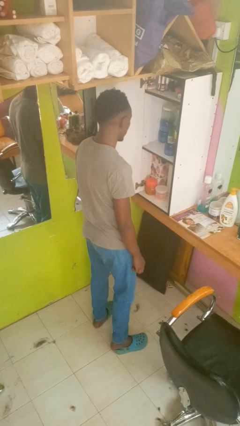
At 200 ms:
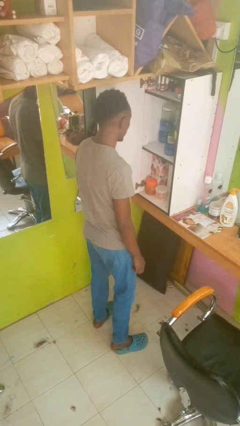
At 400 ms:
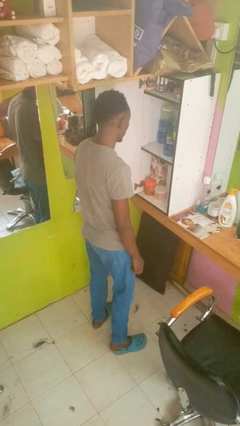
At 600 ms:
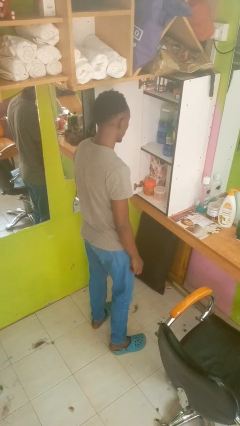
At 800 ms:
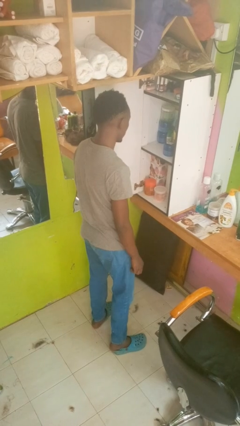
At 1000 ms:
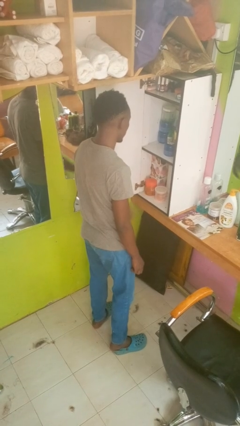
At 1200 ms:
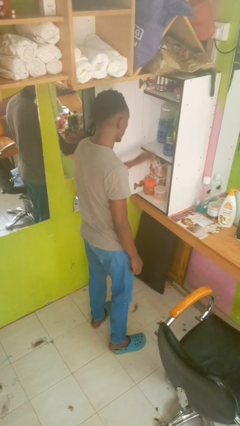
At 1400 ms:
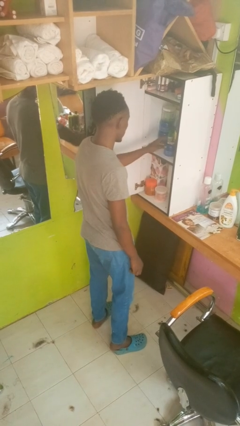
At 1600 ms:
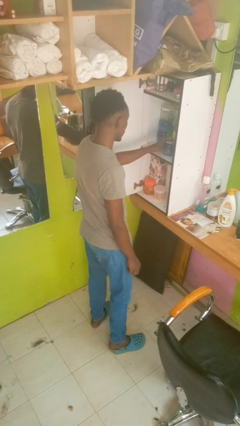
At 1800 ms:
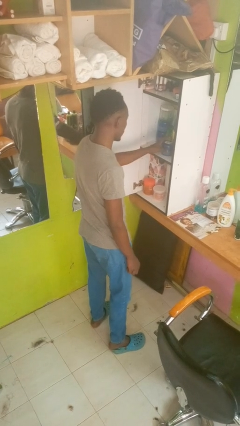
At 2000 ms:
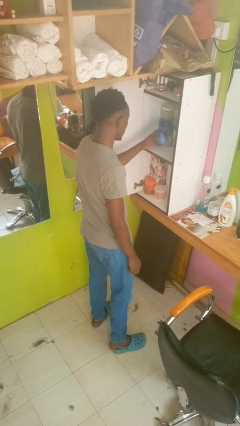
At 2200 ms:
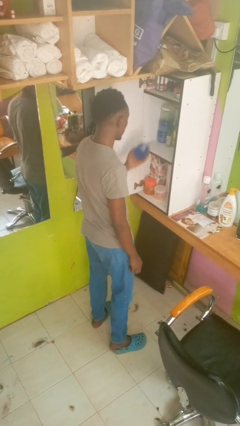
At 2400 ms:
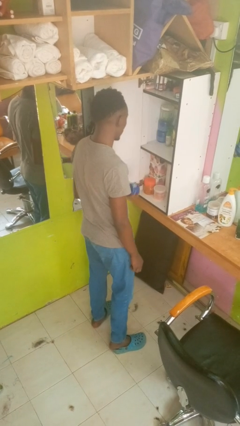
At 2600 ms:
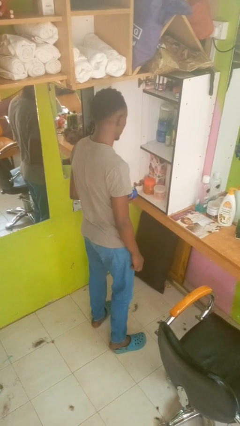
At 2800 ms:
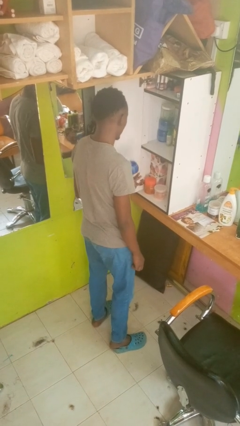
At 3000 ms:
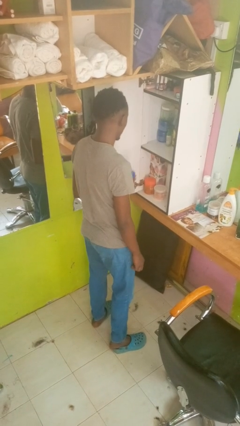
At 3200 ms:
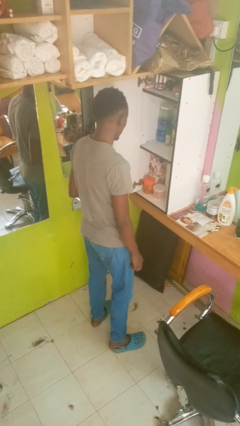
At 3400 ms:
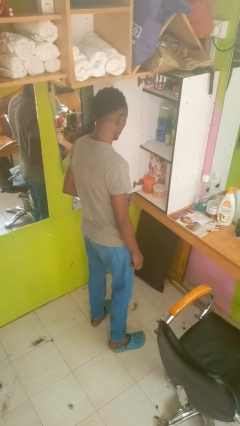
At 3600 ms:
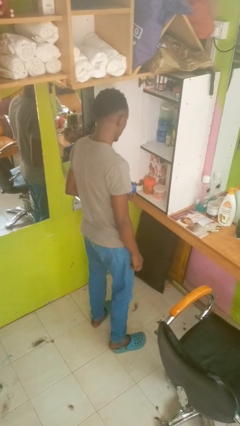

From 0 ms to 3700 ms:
person picks up object from cabinet

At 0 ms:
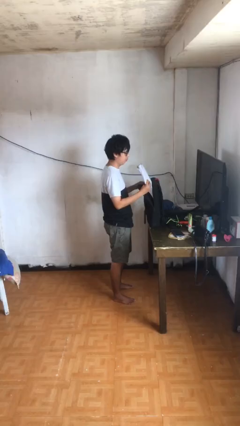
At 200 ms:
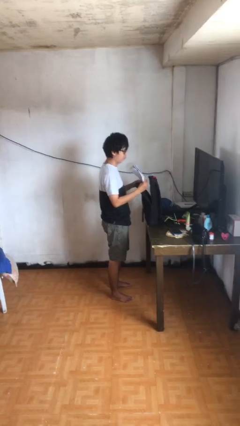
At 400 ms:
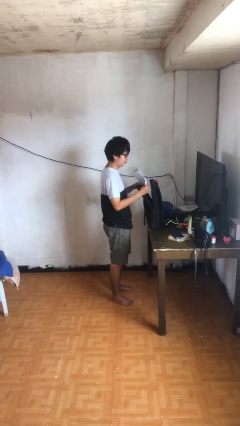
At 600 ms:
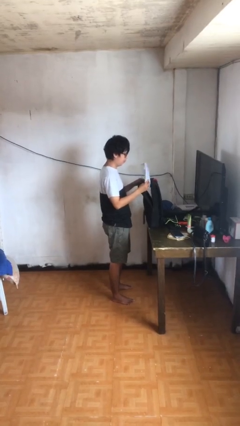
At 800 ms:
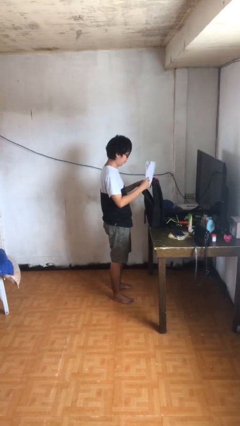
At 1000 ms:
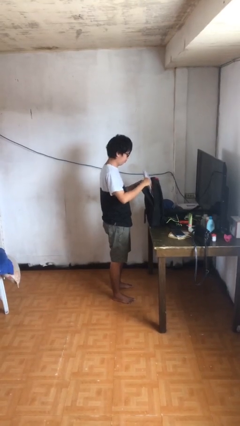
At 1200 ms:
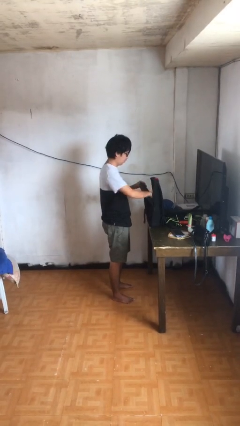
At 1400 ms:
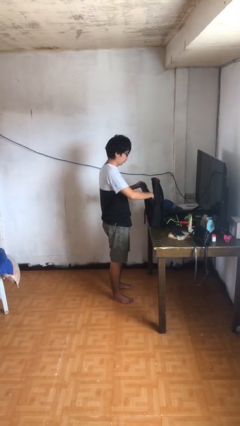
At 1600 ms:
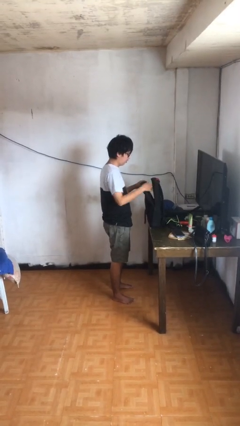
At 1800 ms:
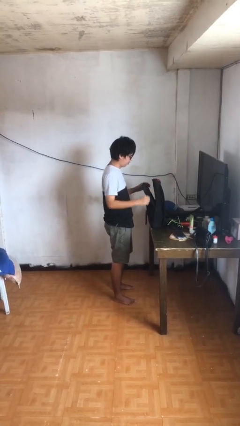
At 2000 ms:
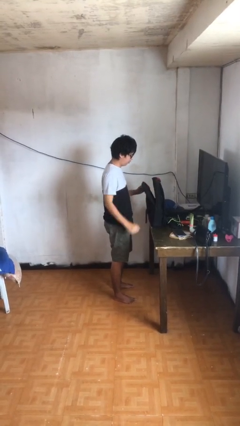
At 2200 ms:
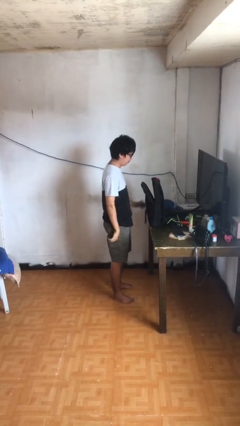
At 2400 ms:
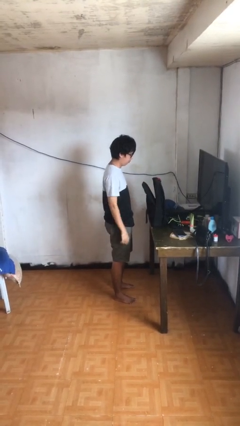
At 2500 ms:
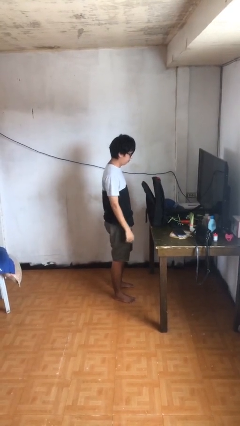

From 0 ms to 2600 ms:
person puts object into backpack

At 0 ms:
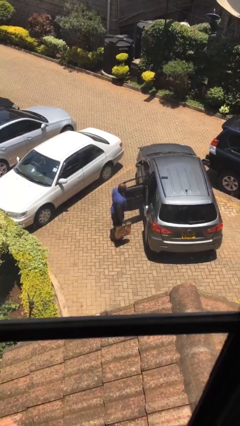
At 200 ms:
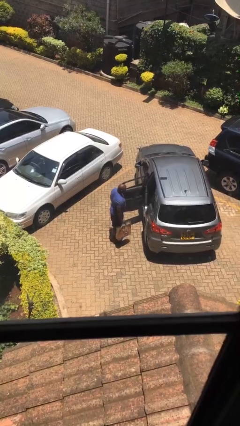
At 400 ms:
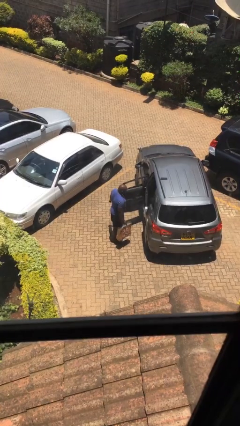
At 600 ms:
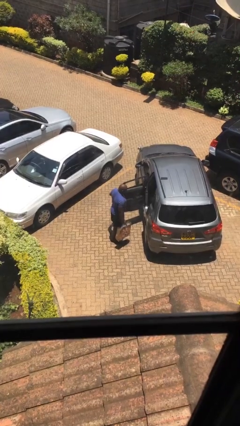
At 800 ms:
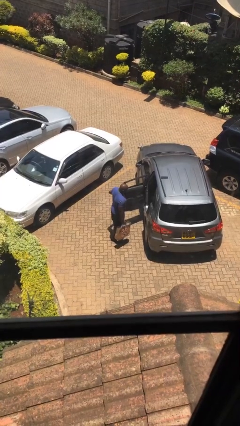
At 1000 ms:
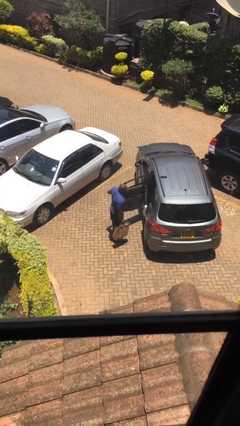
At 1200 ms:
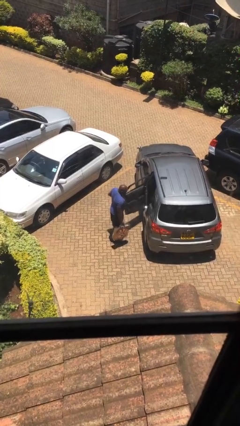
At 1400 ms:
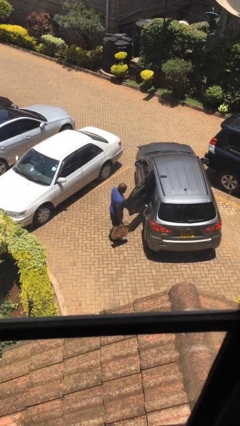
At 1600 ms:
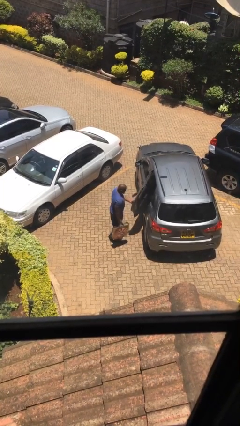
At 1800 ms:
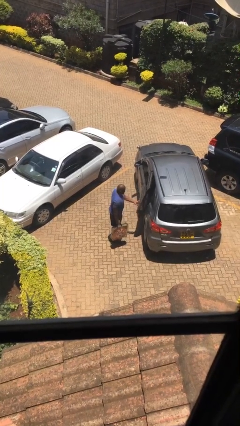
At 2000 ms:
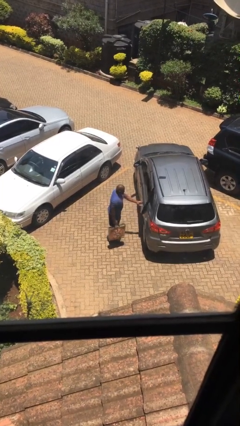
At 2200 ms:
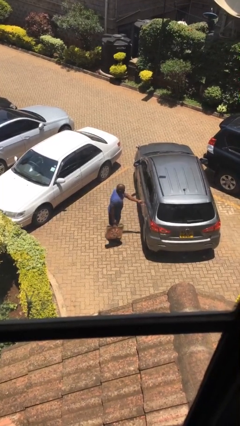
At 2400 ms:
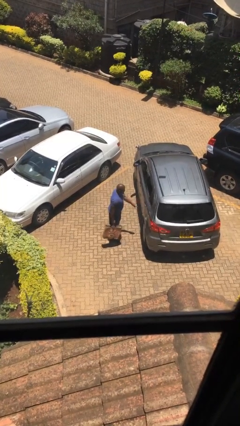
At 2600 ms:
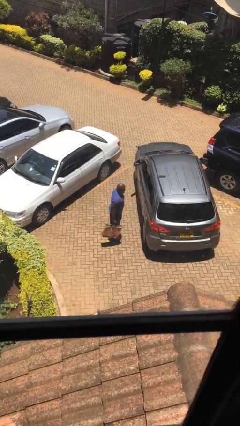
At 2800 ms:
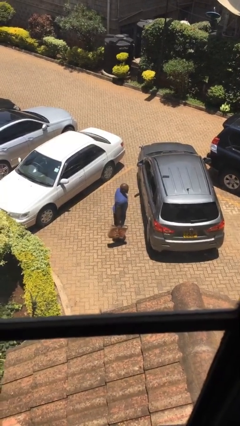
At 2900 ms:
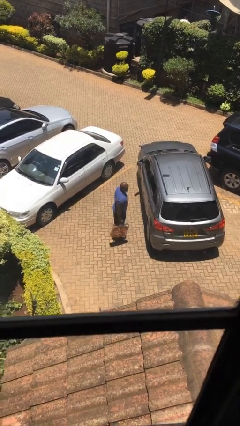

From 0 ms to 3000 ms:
person closes car door

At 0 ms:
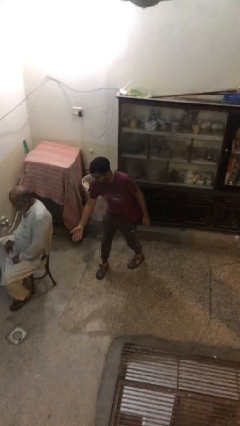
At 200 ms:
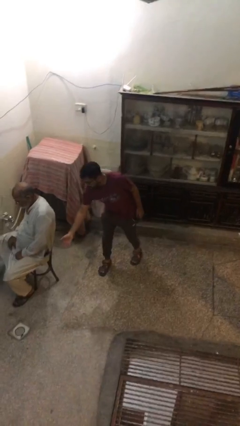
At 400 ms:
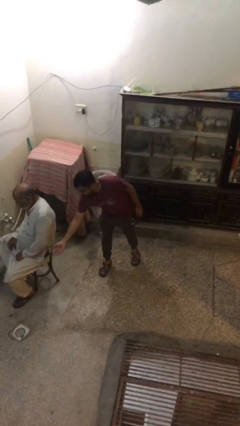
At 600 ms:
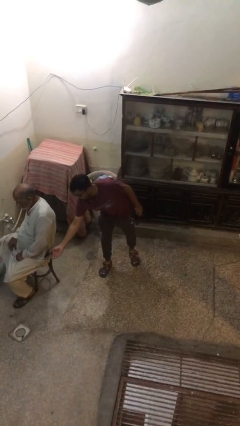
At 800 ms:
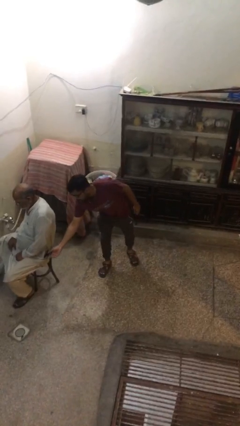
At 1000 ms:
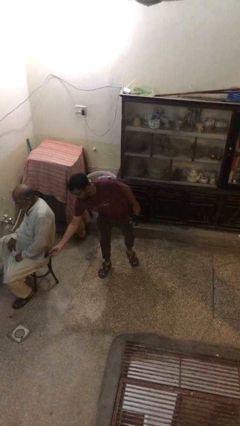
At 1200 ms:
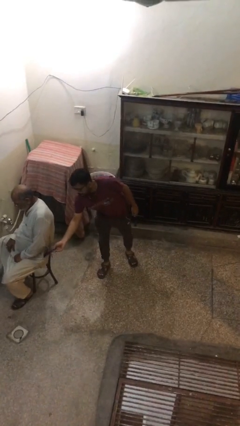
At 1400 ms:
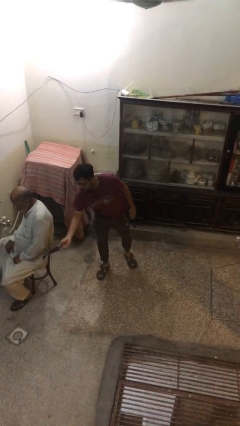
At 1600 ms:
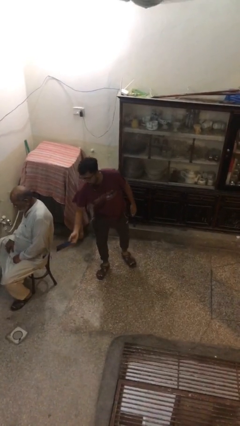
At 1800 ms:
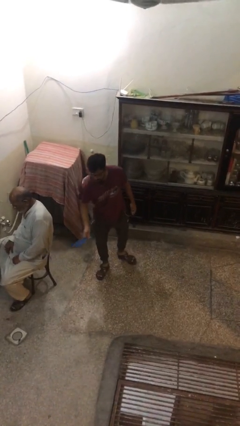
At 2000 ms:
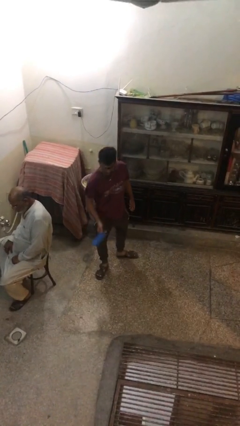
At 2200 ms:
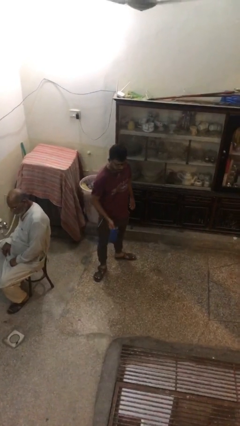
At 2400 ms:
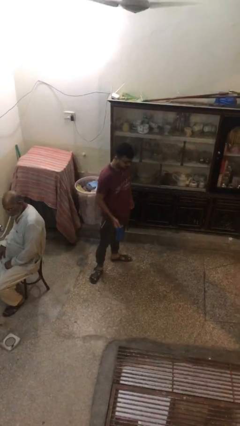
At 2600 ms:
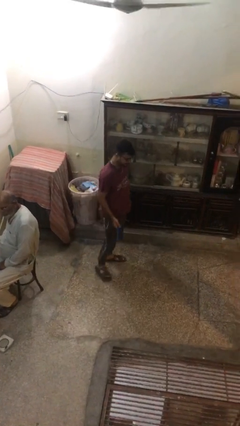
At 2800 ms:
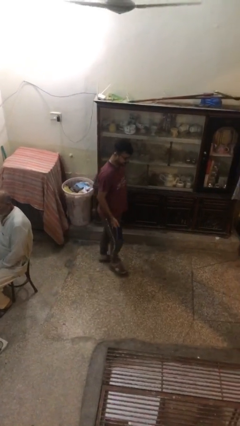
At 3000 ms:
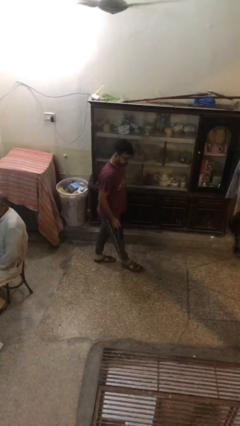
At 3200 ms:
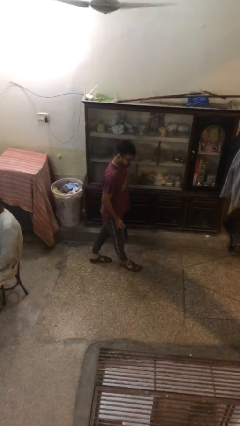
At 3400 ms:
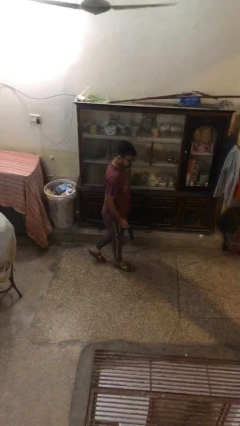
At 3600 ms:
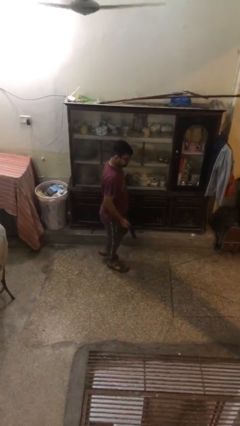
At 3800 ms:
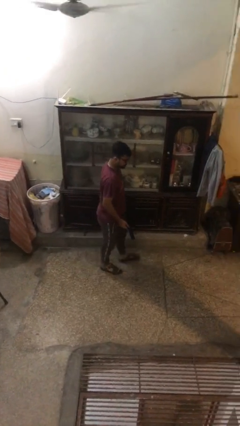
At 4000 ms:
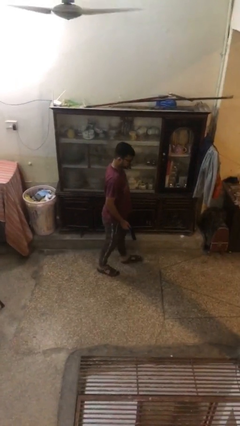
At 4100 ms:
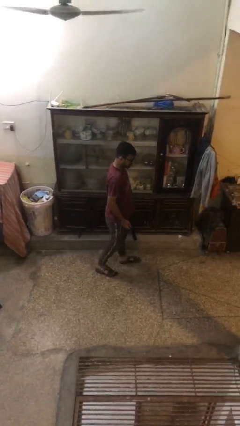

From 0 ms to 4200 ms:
person steals object from person

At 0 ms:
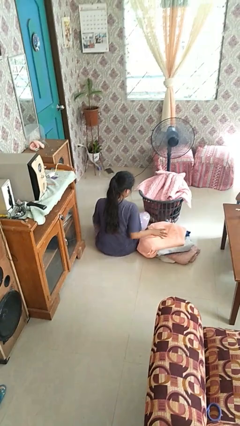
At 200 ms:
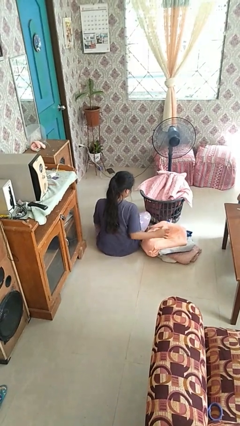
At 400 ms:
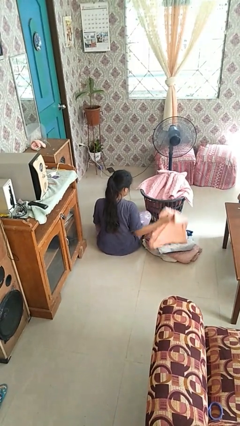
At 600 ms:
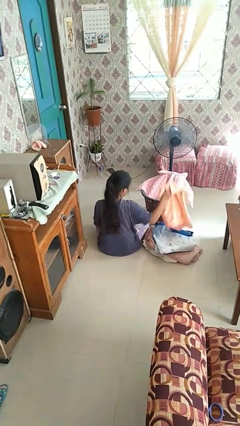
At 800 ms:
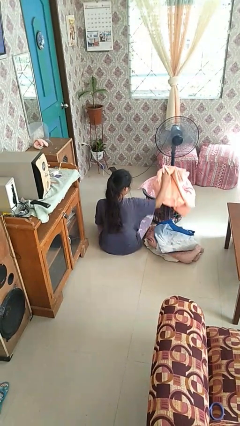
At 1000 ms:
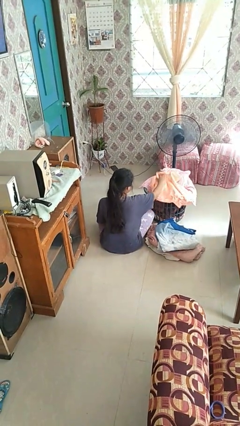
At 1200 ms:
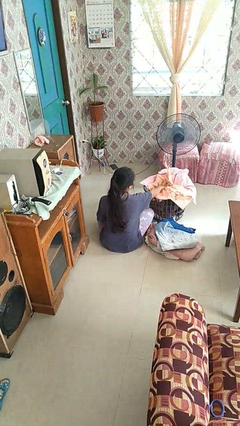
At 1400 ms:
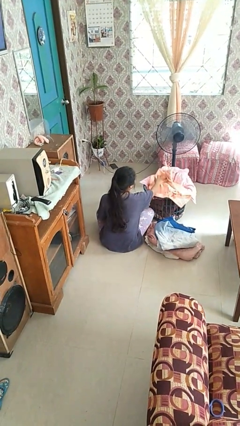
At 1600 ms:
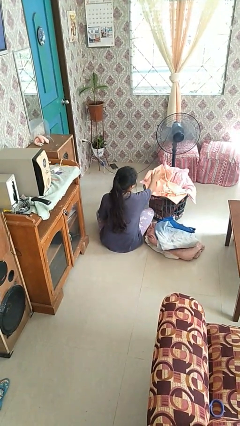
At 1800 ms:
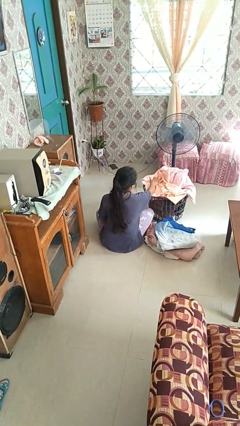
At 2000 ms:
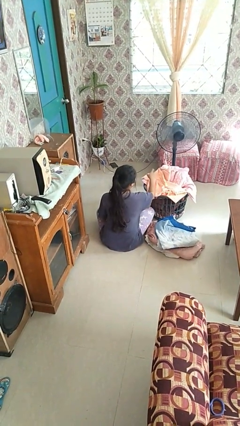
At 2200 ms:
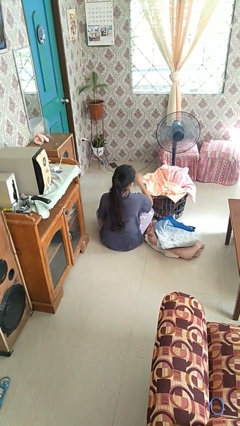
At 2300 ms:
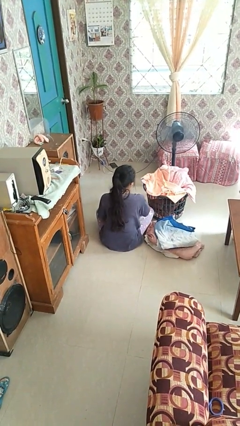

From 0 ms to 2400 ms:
person puts object into basket

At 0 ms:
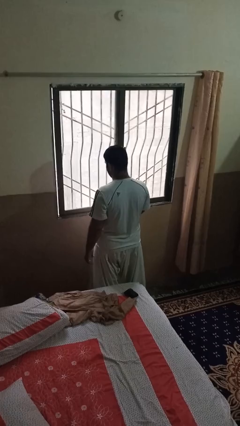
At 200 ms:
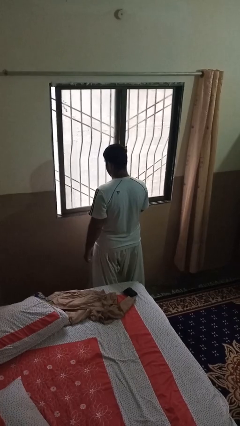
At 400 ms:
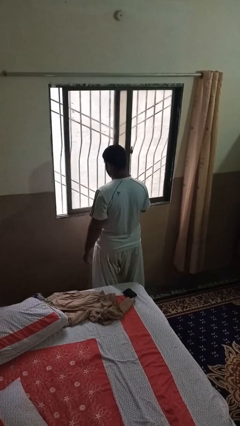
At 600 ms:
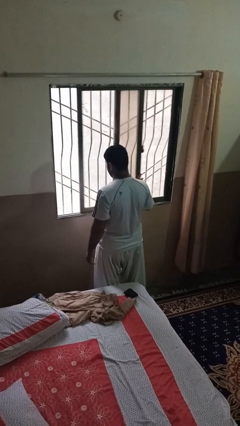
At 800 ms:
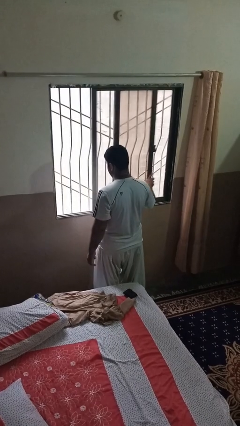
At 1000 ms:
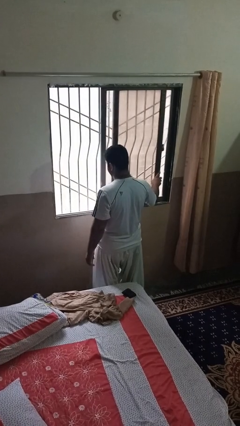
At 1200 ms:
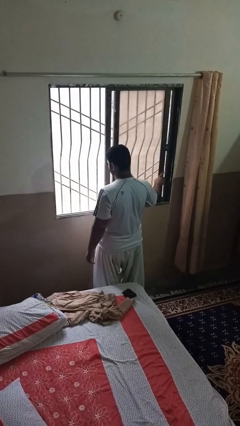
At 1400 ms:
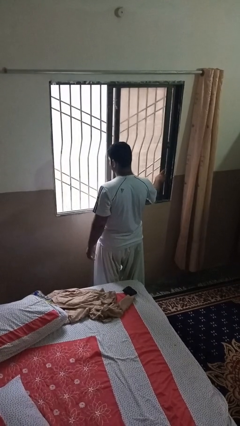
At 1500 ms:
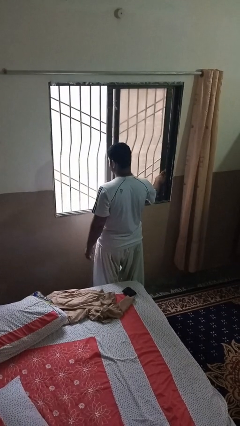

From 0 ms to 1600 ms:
person opens home window
